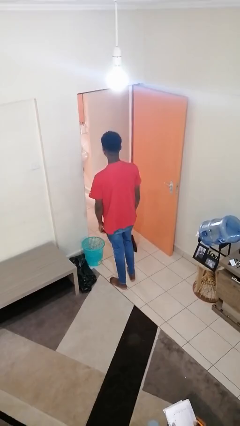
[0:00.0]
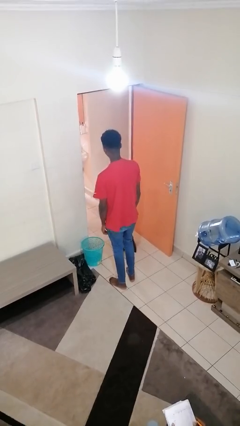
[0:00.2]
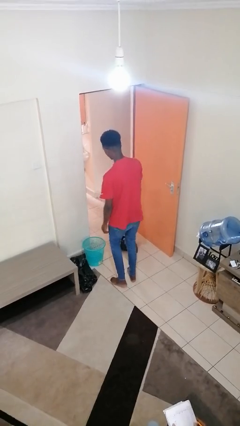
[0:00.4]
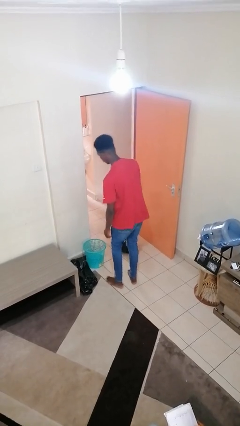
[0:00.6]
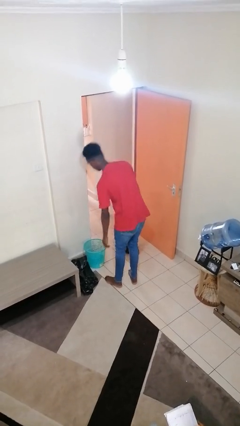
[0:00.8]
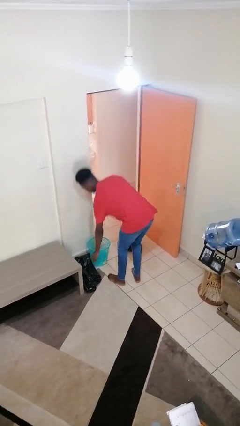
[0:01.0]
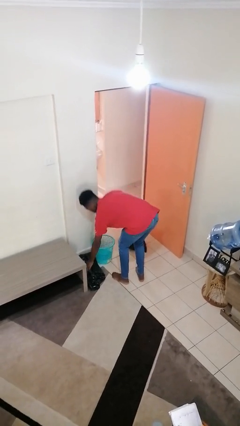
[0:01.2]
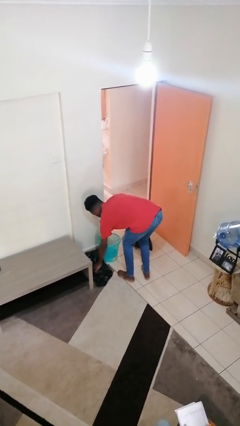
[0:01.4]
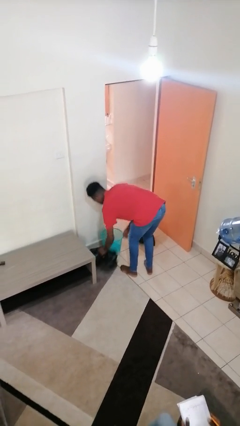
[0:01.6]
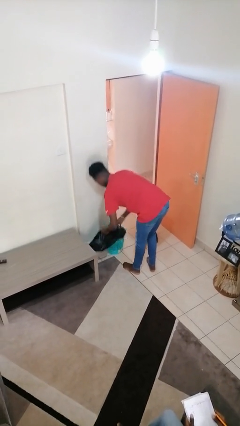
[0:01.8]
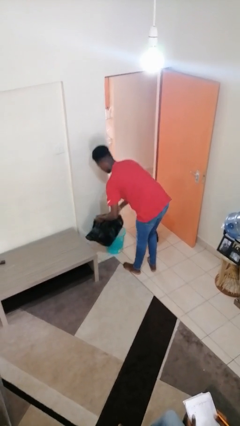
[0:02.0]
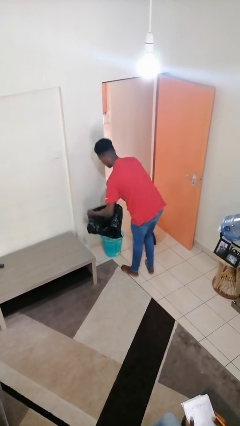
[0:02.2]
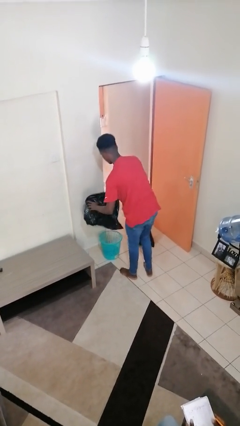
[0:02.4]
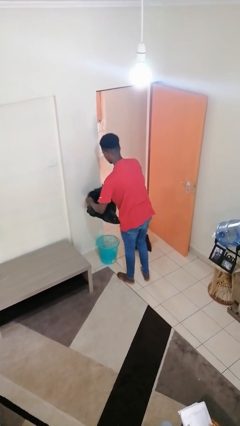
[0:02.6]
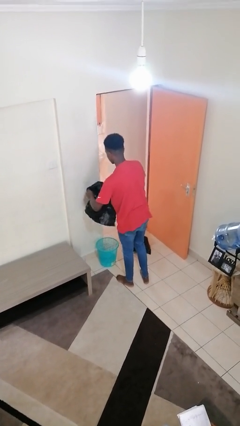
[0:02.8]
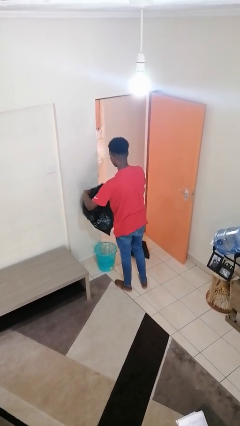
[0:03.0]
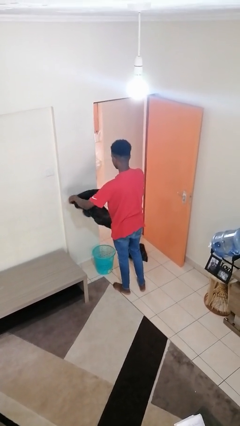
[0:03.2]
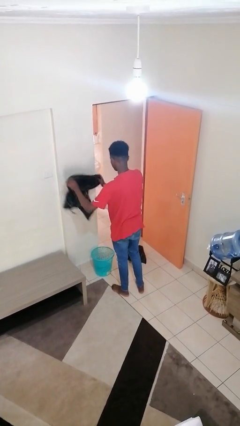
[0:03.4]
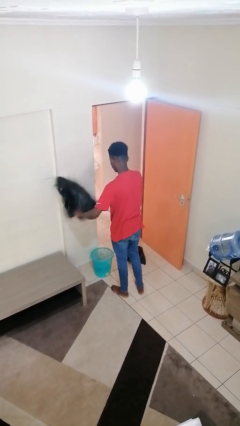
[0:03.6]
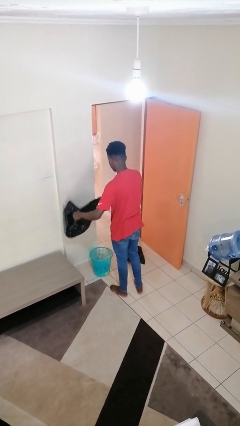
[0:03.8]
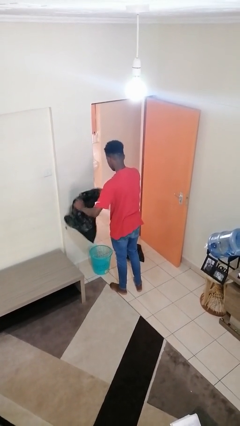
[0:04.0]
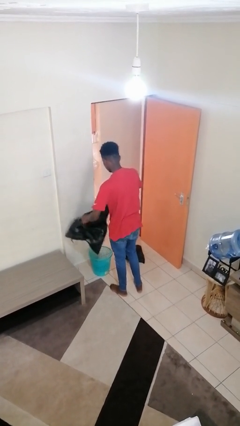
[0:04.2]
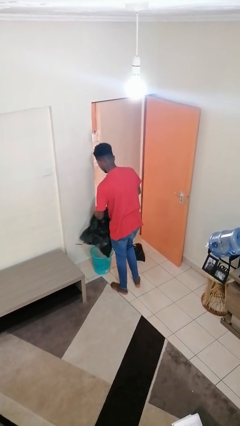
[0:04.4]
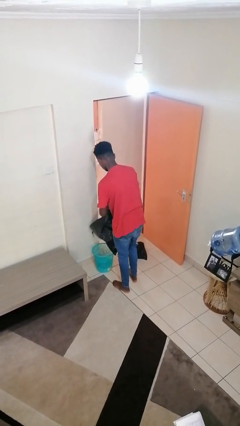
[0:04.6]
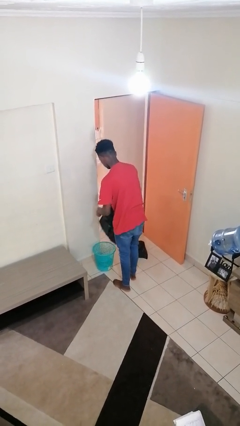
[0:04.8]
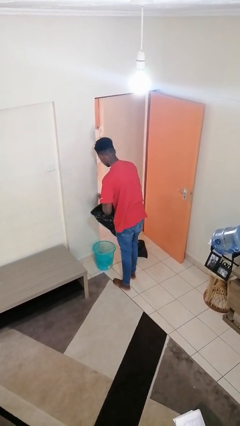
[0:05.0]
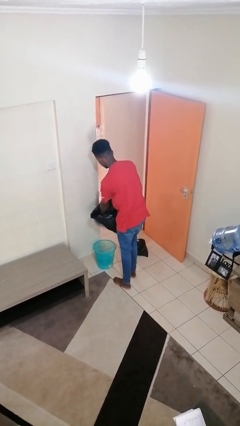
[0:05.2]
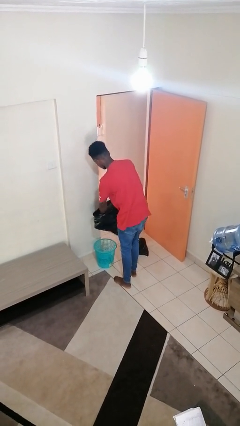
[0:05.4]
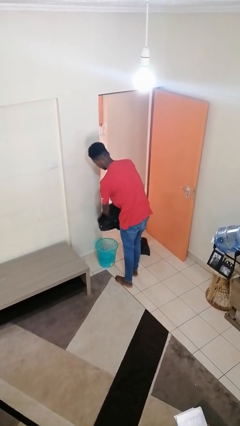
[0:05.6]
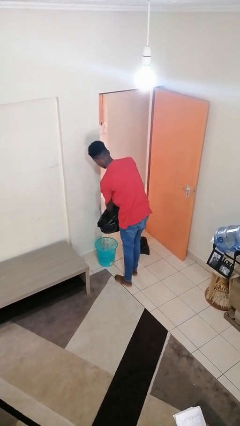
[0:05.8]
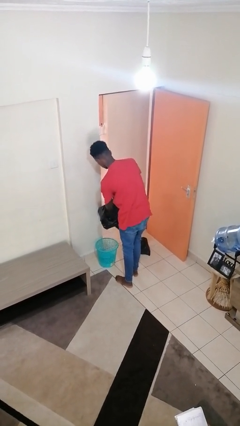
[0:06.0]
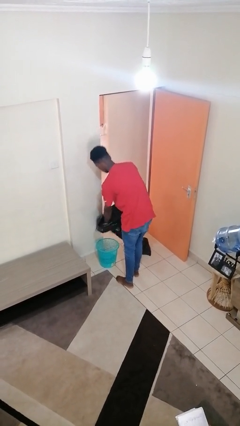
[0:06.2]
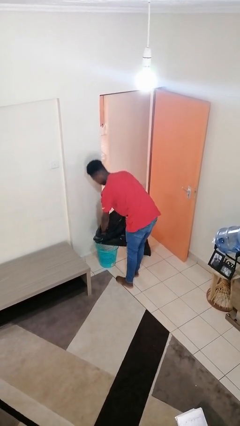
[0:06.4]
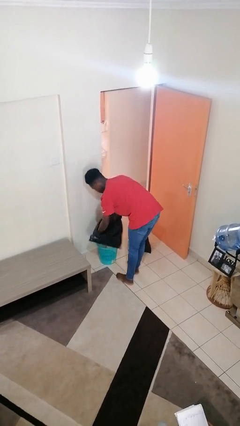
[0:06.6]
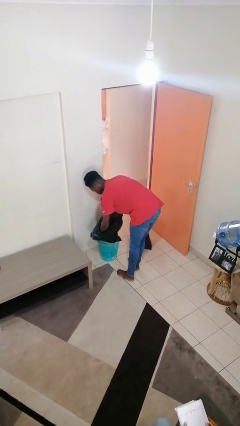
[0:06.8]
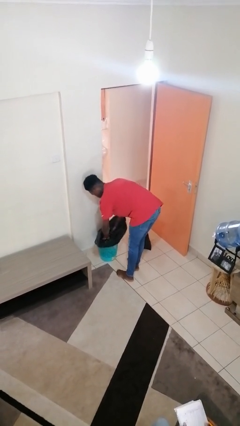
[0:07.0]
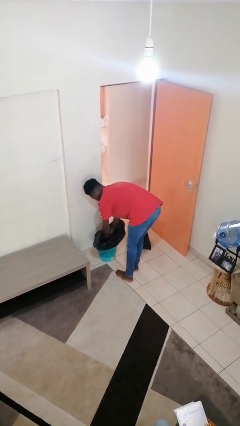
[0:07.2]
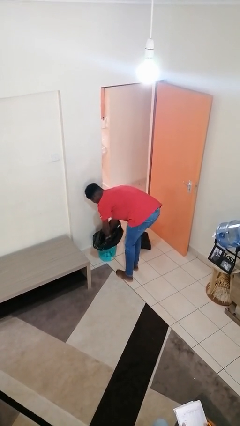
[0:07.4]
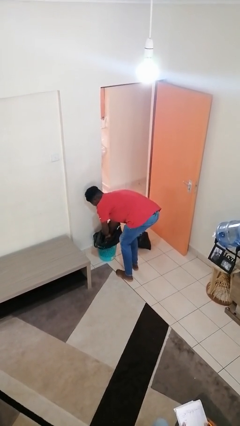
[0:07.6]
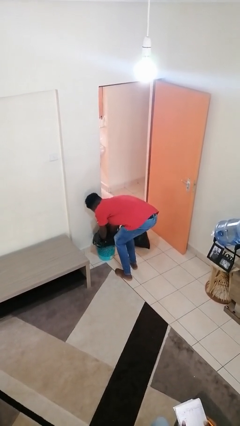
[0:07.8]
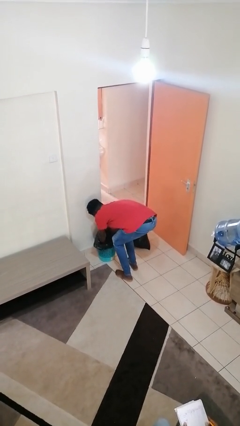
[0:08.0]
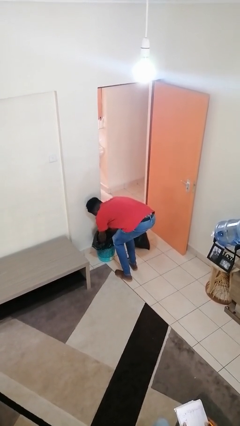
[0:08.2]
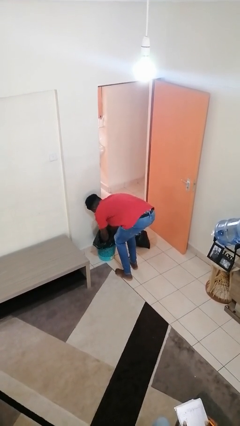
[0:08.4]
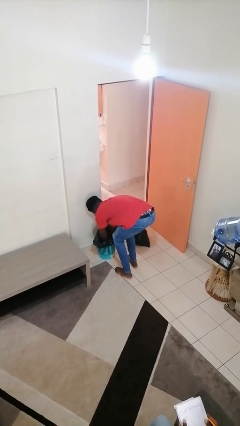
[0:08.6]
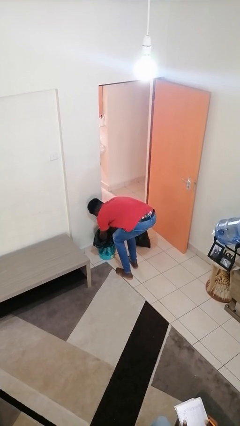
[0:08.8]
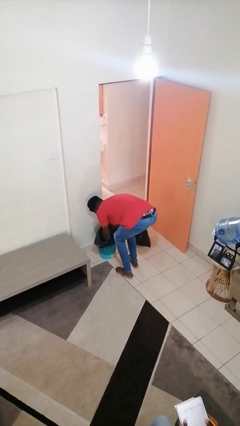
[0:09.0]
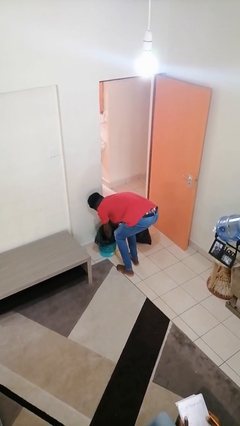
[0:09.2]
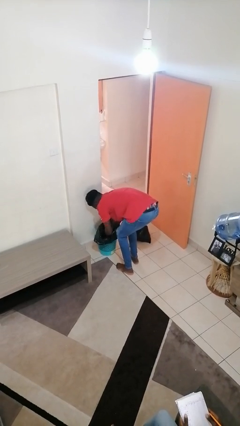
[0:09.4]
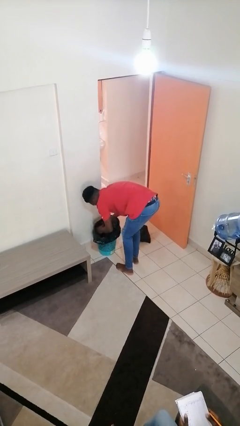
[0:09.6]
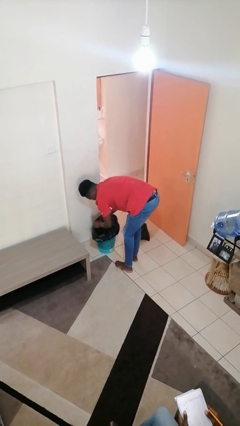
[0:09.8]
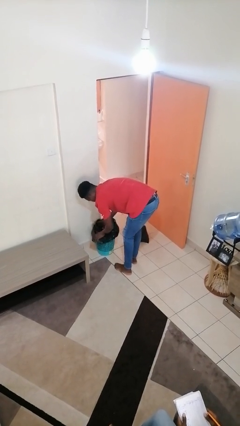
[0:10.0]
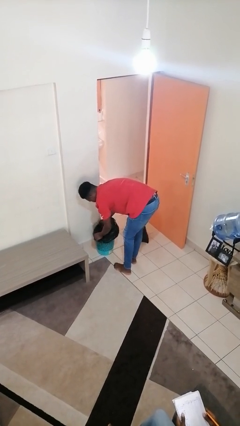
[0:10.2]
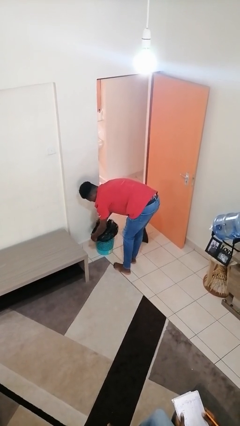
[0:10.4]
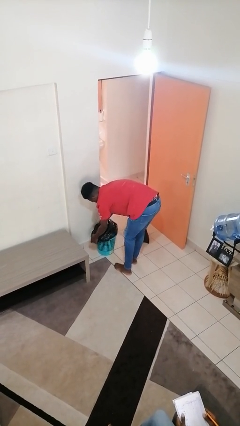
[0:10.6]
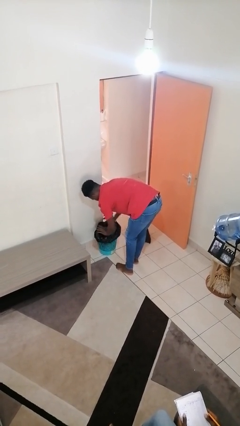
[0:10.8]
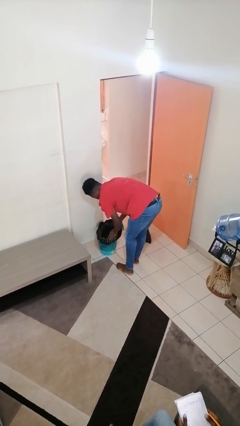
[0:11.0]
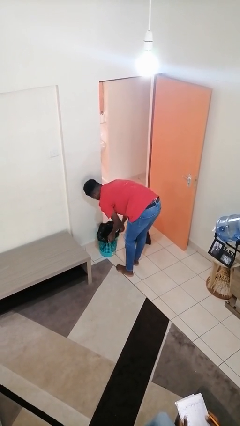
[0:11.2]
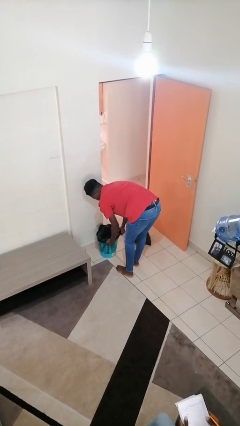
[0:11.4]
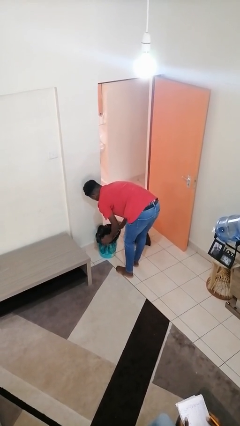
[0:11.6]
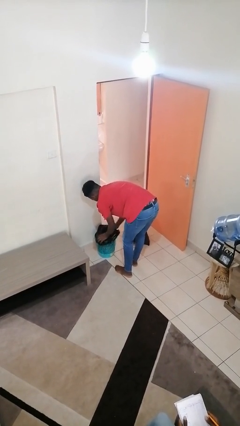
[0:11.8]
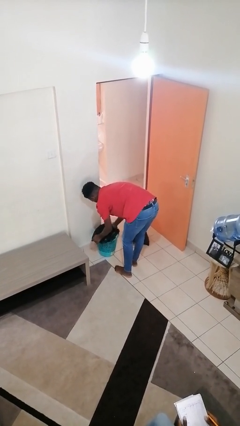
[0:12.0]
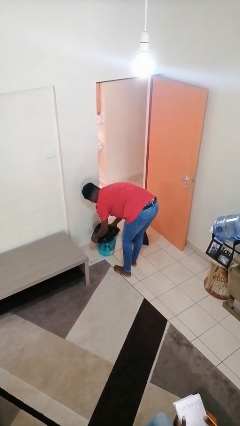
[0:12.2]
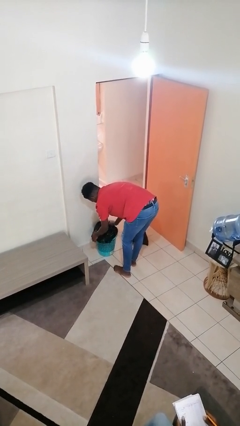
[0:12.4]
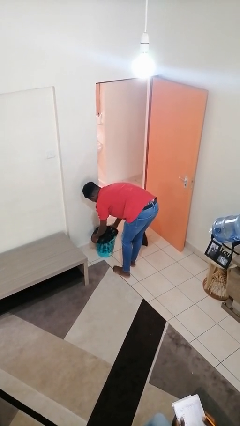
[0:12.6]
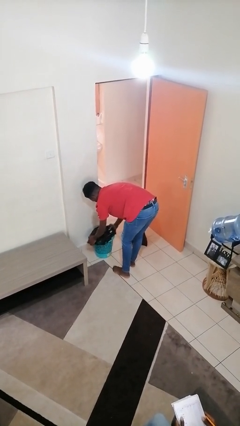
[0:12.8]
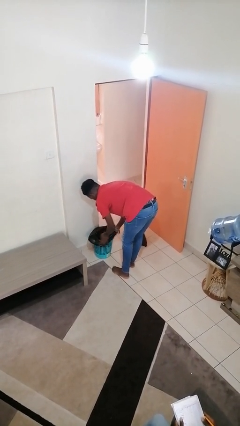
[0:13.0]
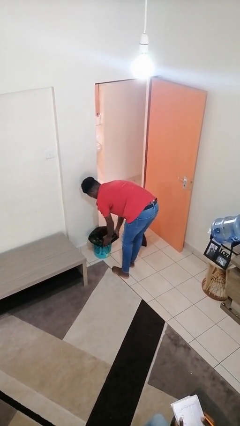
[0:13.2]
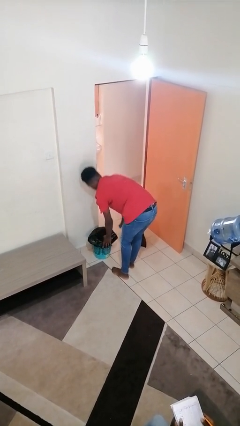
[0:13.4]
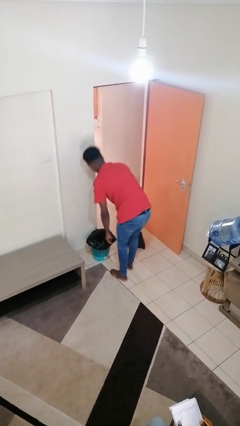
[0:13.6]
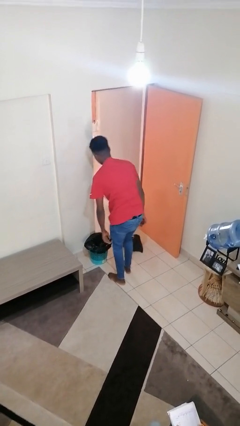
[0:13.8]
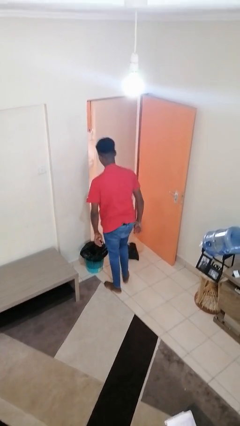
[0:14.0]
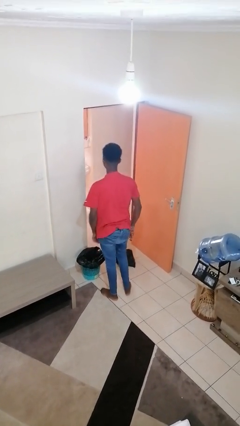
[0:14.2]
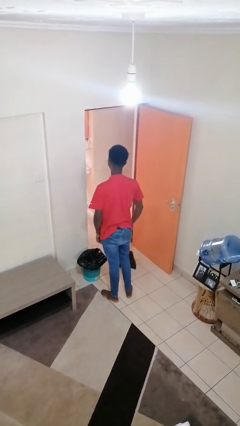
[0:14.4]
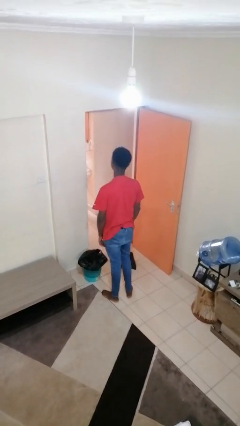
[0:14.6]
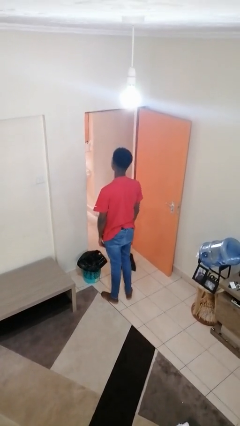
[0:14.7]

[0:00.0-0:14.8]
person inserts trashbag into trashcan

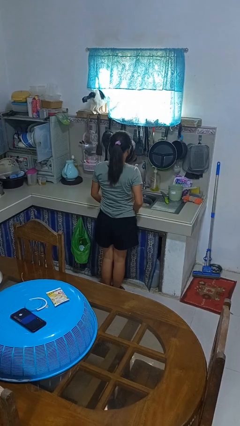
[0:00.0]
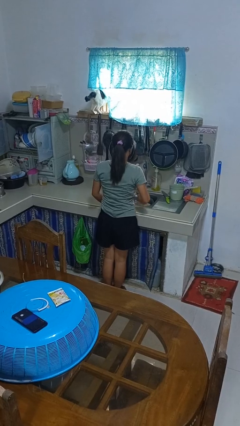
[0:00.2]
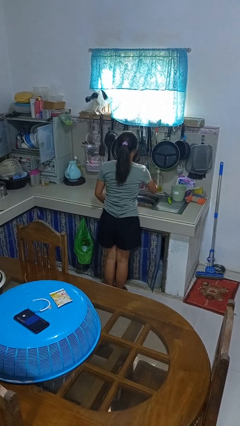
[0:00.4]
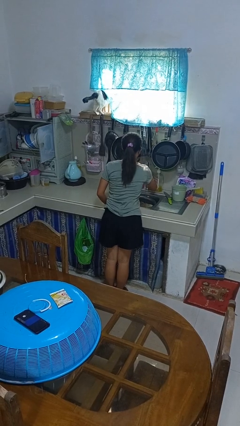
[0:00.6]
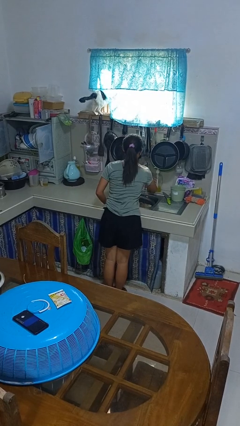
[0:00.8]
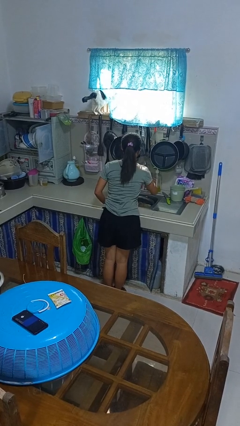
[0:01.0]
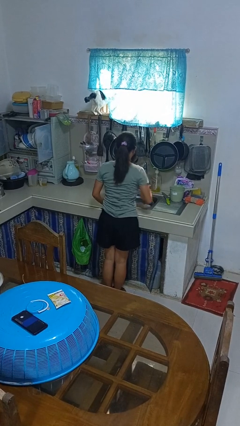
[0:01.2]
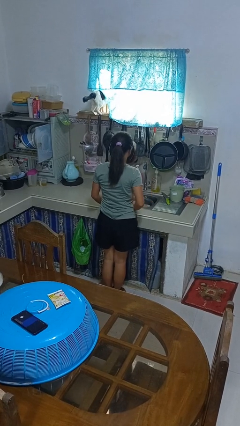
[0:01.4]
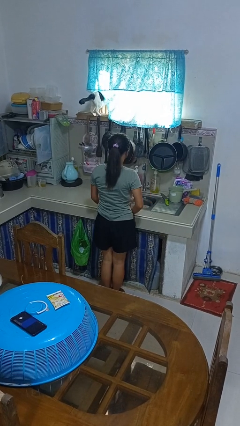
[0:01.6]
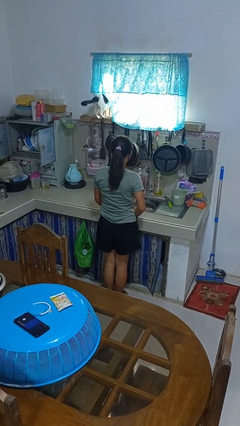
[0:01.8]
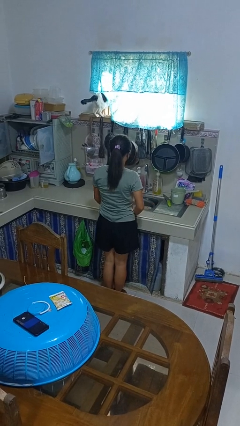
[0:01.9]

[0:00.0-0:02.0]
person turns off faucet

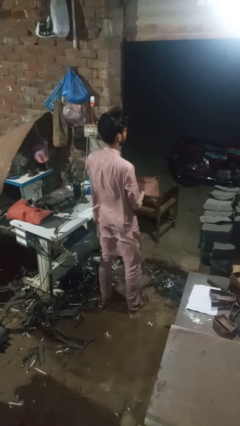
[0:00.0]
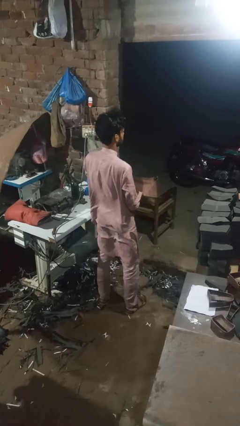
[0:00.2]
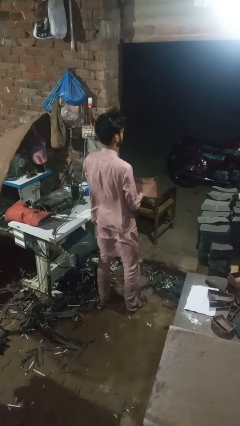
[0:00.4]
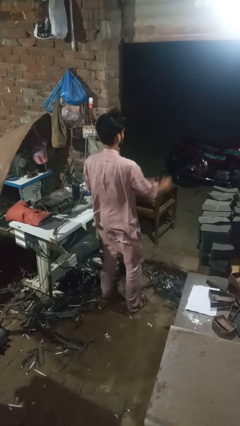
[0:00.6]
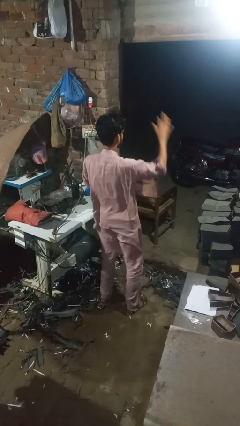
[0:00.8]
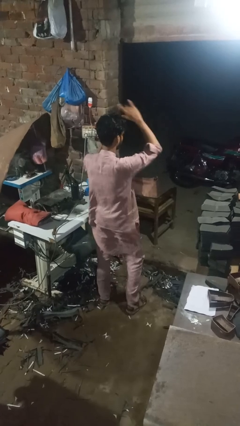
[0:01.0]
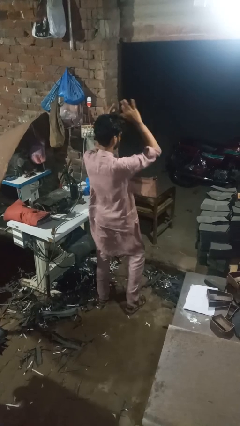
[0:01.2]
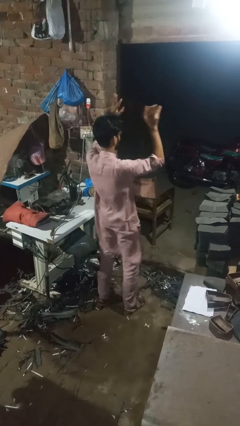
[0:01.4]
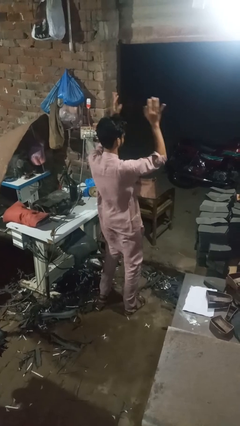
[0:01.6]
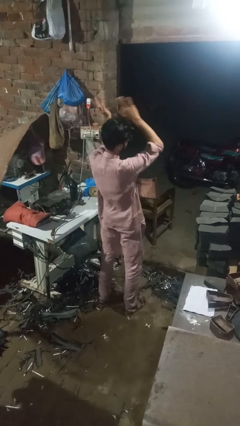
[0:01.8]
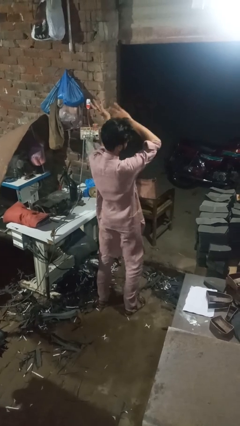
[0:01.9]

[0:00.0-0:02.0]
person dances in place
